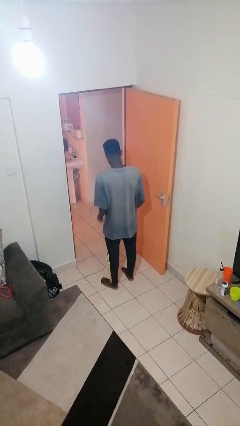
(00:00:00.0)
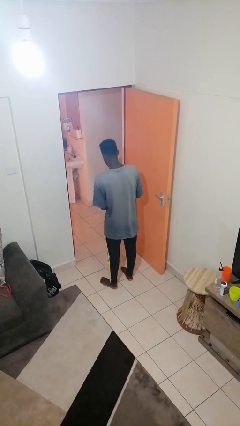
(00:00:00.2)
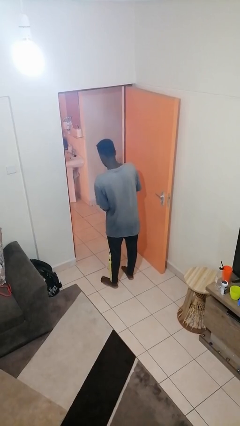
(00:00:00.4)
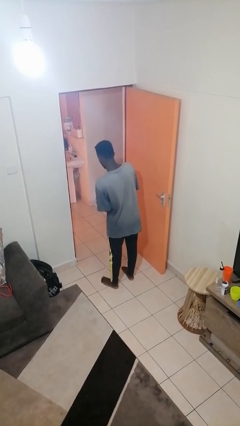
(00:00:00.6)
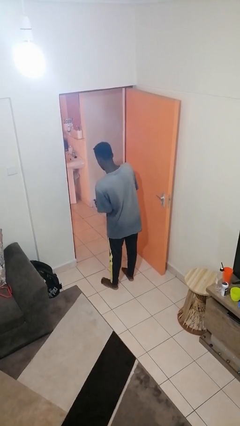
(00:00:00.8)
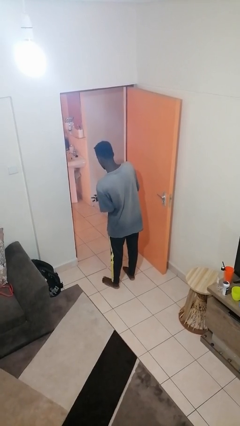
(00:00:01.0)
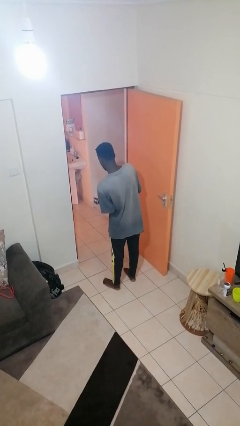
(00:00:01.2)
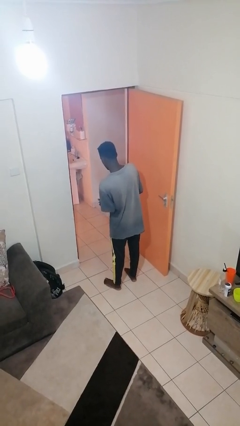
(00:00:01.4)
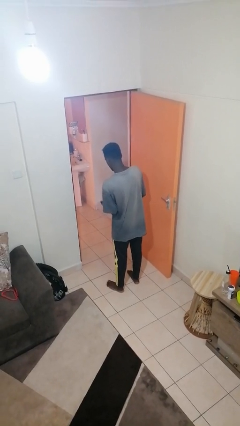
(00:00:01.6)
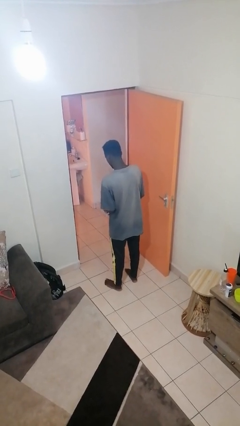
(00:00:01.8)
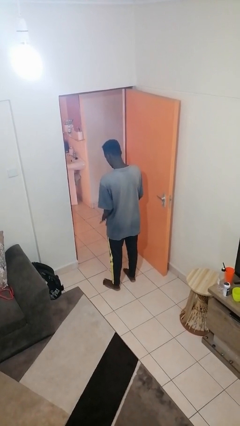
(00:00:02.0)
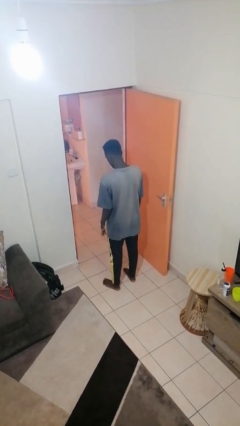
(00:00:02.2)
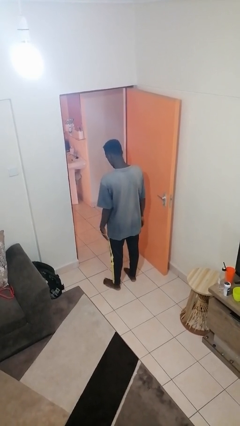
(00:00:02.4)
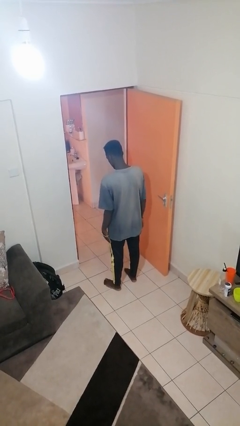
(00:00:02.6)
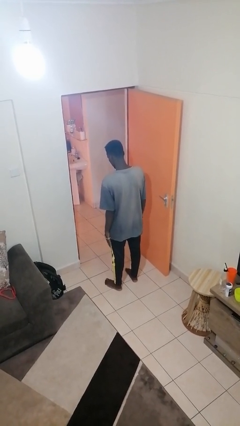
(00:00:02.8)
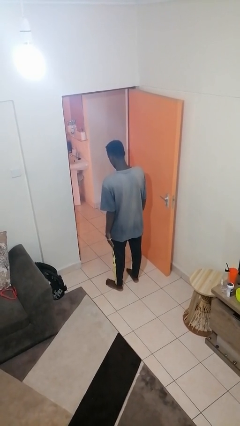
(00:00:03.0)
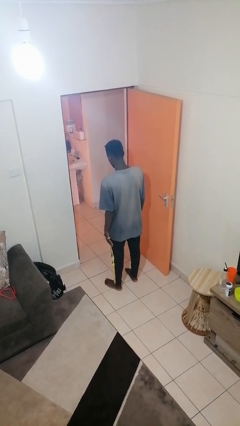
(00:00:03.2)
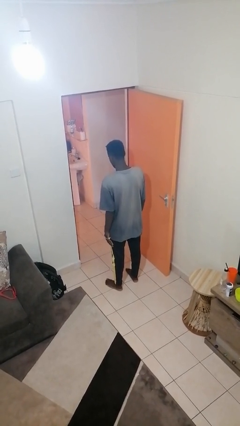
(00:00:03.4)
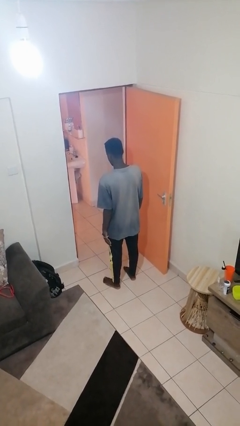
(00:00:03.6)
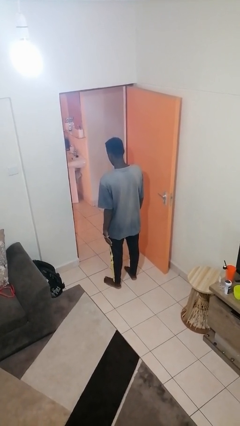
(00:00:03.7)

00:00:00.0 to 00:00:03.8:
person puts on wristwatch

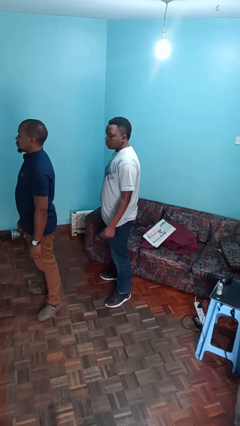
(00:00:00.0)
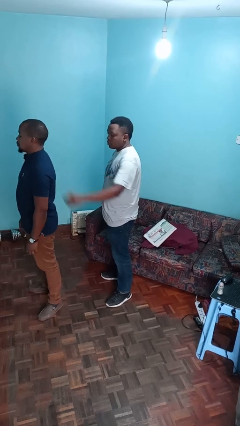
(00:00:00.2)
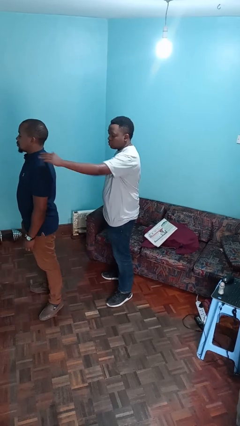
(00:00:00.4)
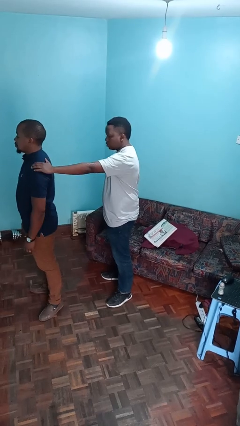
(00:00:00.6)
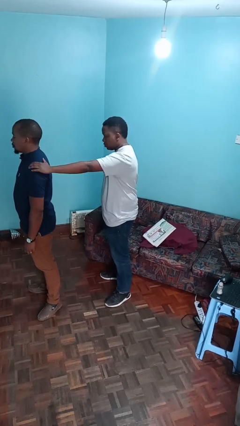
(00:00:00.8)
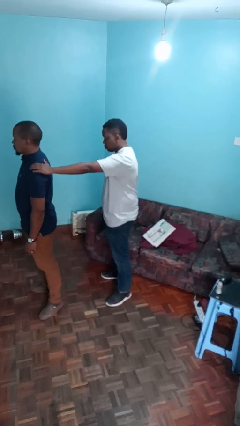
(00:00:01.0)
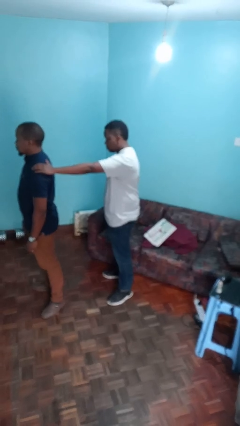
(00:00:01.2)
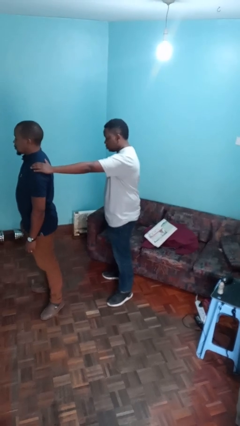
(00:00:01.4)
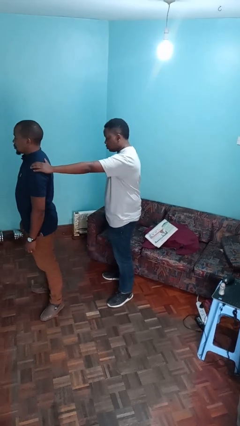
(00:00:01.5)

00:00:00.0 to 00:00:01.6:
person grabs person by shoulder

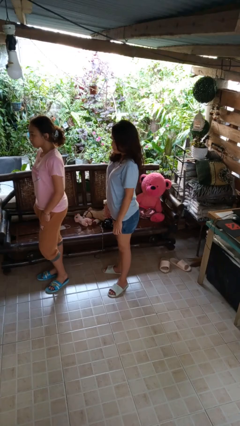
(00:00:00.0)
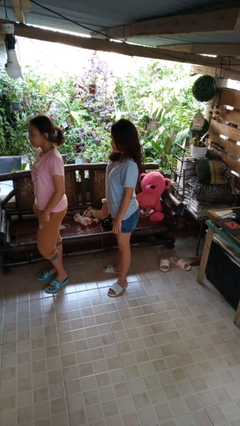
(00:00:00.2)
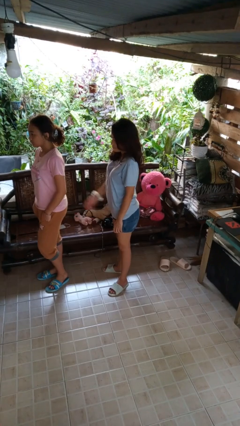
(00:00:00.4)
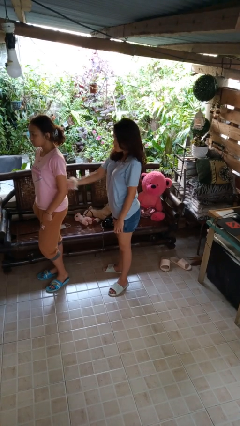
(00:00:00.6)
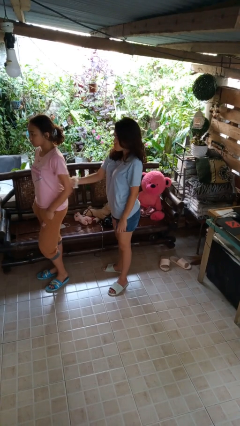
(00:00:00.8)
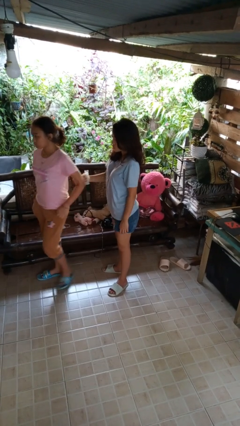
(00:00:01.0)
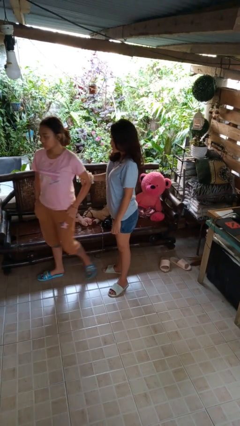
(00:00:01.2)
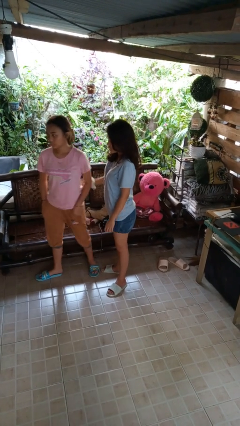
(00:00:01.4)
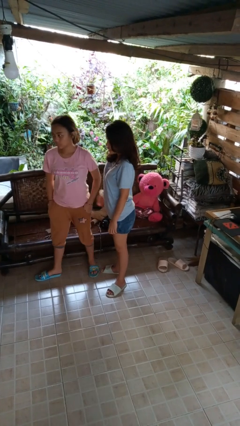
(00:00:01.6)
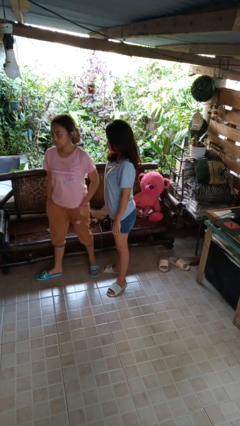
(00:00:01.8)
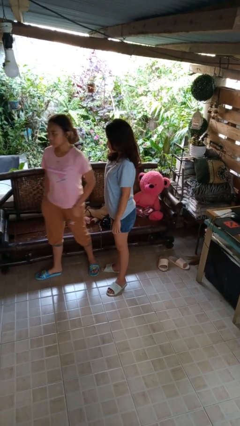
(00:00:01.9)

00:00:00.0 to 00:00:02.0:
person grabs person by bicep

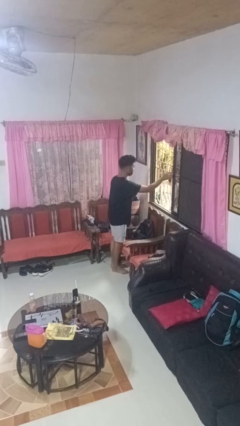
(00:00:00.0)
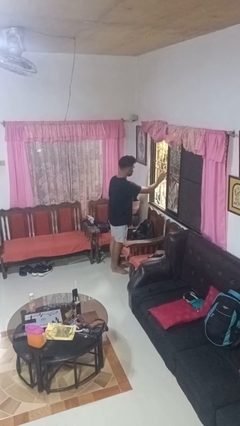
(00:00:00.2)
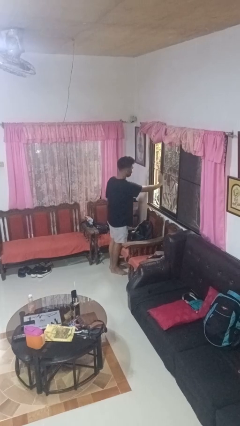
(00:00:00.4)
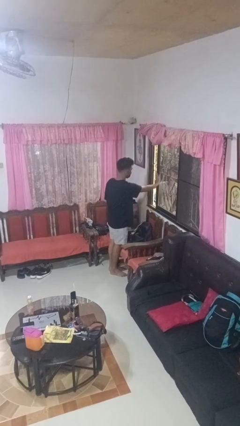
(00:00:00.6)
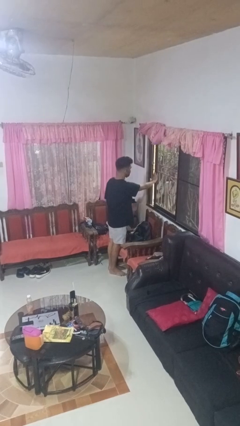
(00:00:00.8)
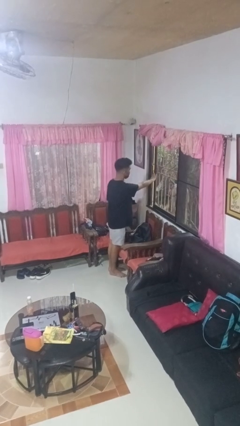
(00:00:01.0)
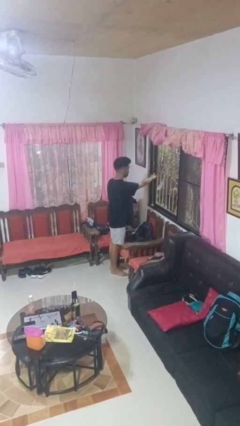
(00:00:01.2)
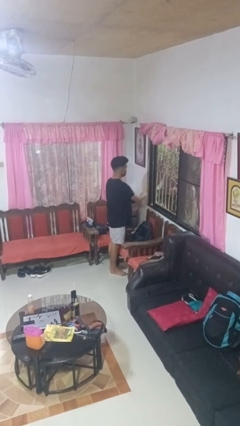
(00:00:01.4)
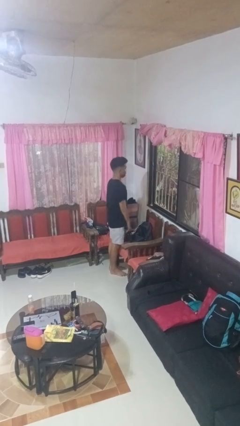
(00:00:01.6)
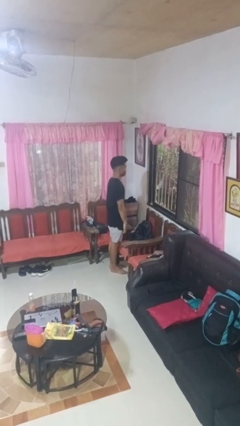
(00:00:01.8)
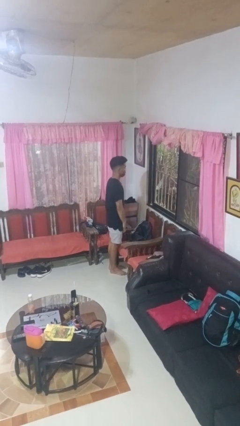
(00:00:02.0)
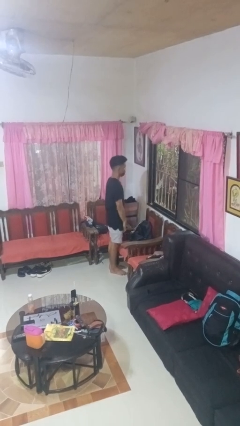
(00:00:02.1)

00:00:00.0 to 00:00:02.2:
person closes home window

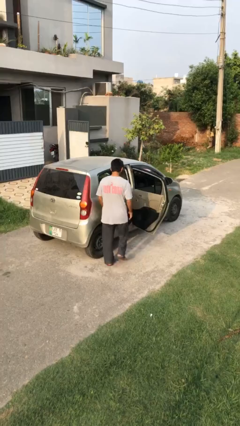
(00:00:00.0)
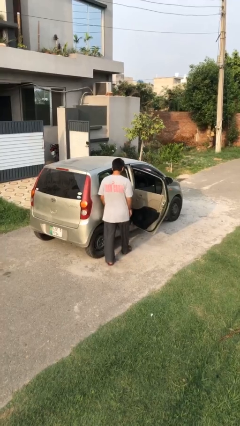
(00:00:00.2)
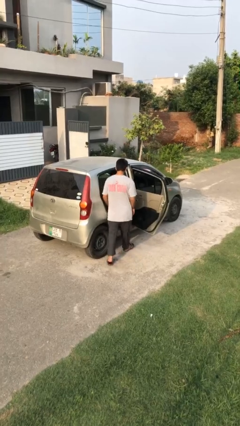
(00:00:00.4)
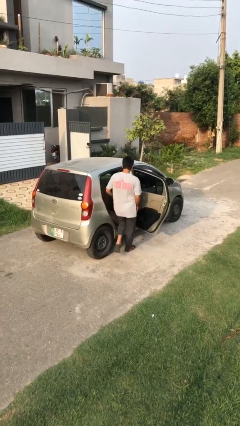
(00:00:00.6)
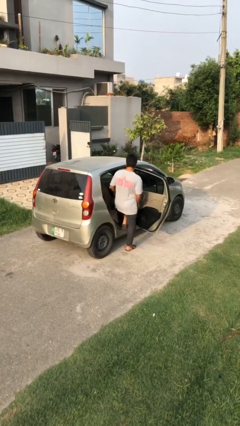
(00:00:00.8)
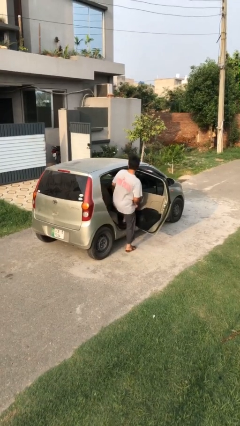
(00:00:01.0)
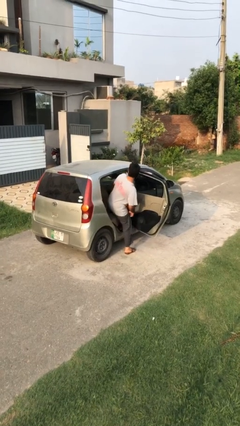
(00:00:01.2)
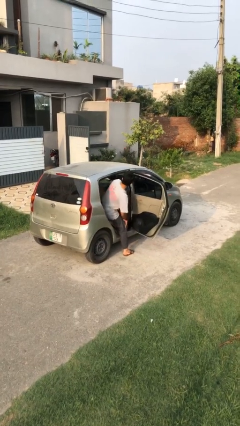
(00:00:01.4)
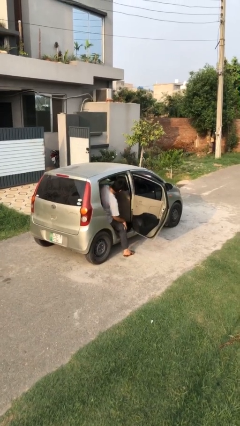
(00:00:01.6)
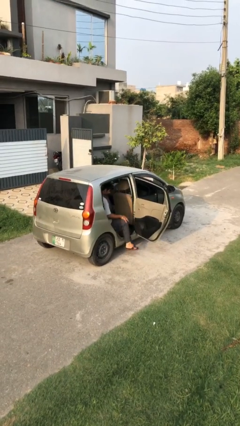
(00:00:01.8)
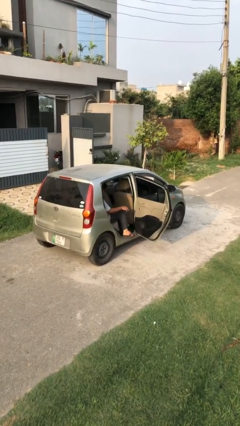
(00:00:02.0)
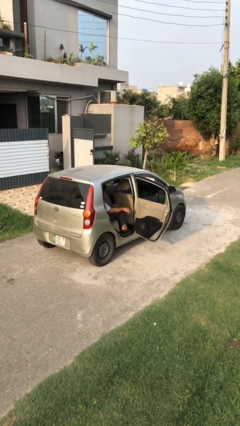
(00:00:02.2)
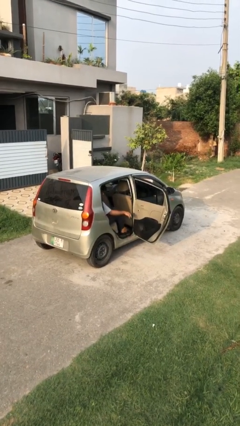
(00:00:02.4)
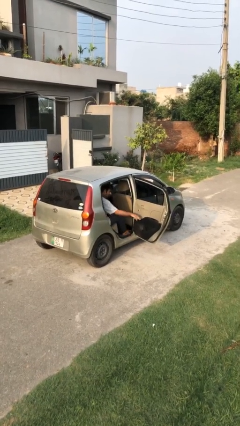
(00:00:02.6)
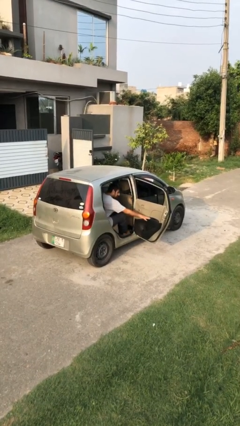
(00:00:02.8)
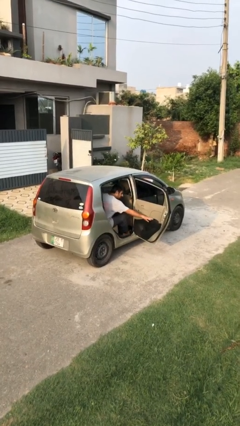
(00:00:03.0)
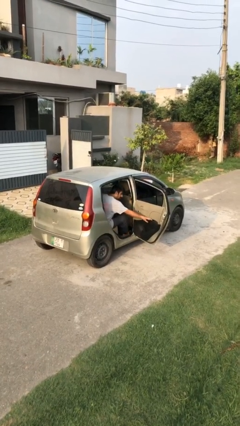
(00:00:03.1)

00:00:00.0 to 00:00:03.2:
person enters car

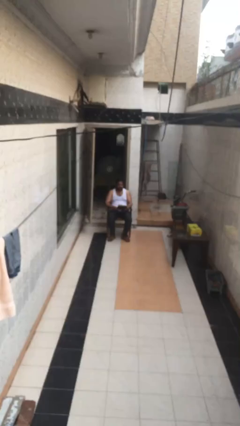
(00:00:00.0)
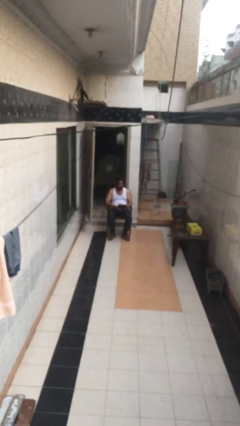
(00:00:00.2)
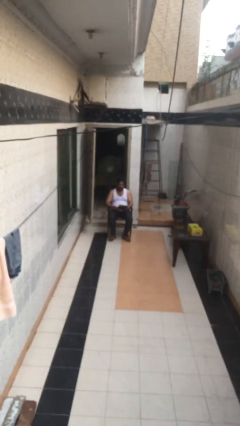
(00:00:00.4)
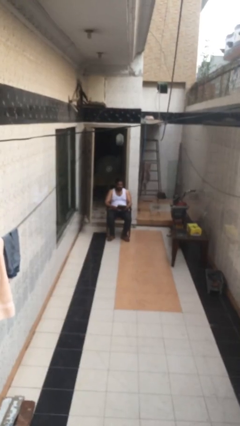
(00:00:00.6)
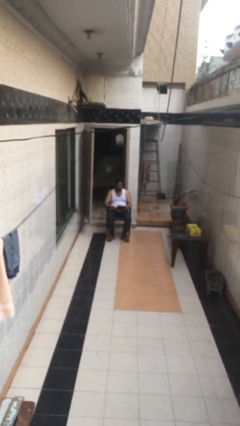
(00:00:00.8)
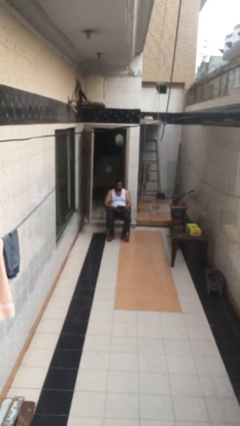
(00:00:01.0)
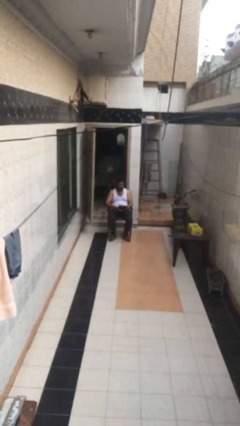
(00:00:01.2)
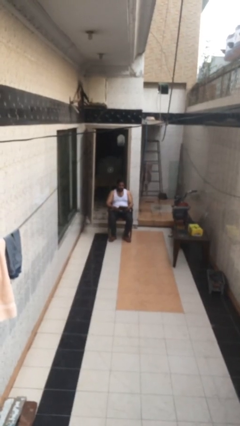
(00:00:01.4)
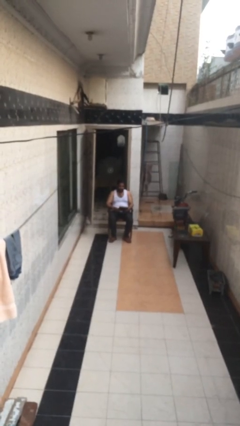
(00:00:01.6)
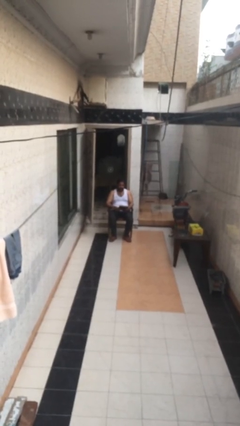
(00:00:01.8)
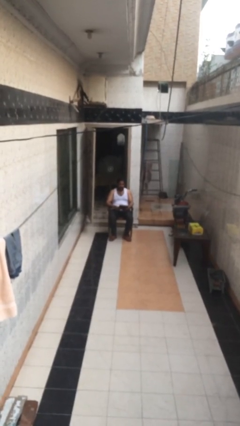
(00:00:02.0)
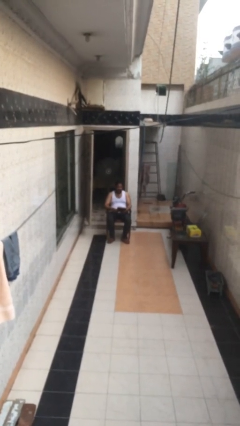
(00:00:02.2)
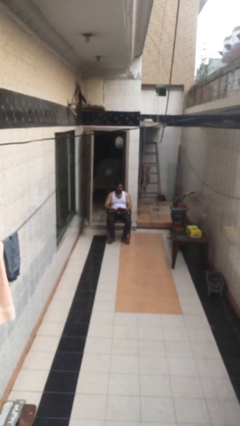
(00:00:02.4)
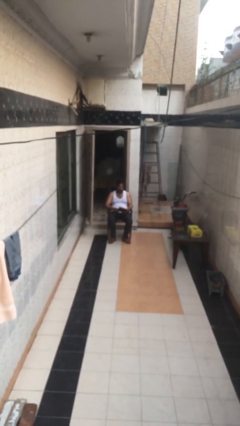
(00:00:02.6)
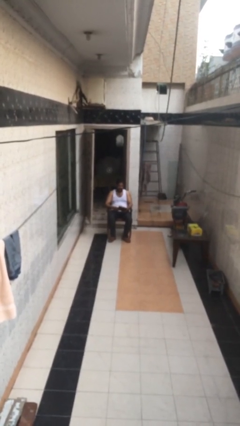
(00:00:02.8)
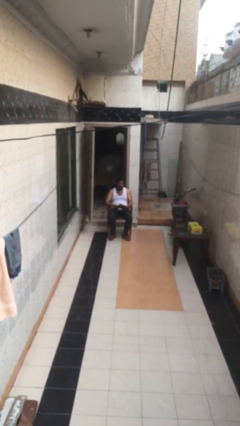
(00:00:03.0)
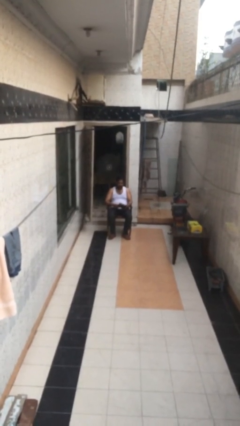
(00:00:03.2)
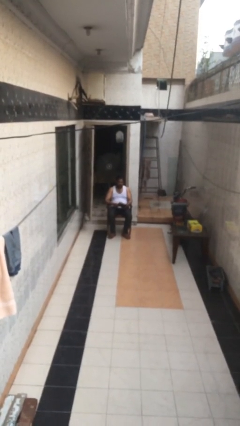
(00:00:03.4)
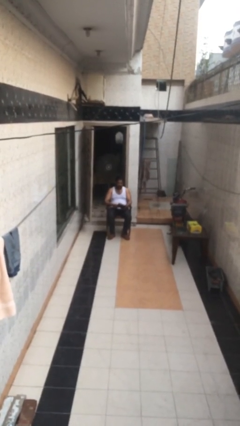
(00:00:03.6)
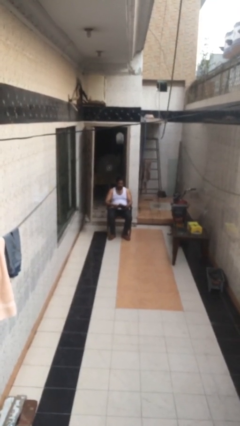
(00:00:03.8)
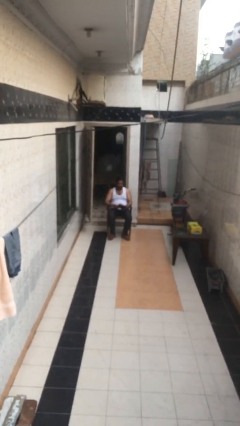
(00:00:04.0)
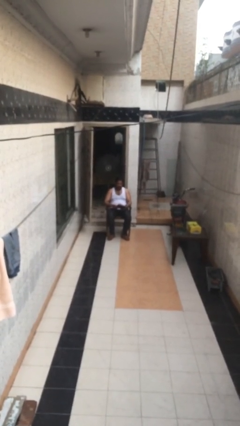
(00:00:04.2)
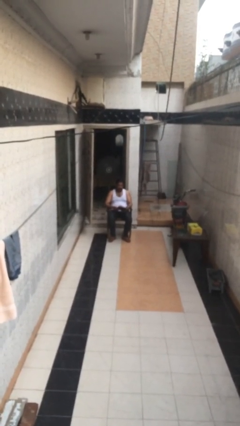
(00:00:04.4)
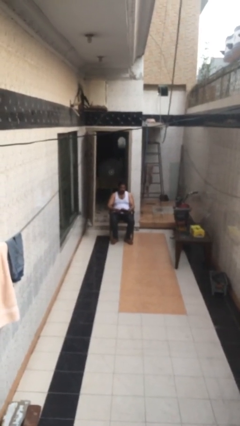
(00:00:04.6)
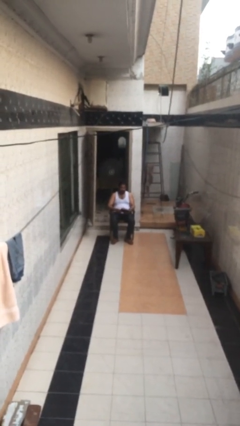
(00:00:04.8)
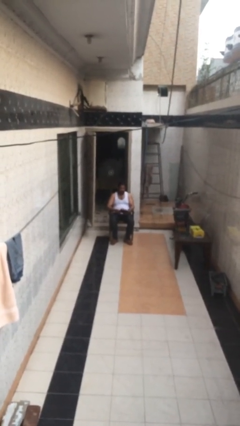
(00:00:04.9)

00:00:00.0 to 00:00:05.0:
person sits down
